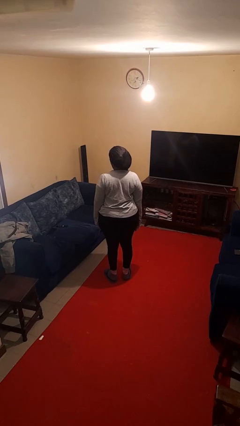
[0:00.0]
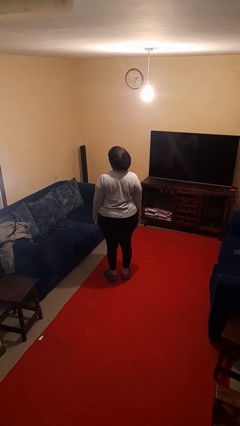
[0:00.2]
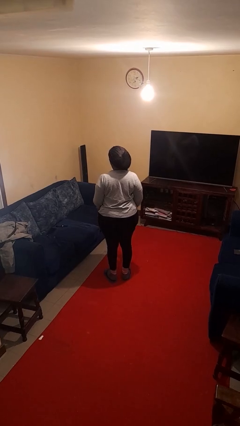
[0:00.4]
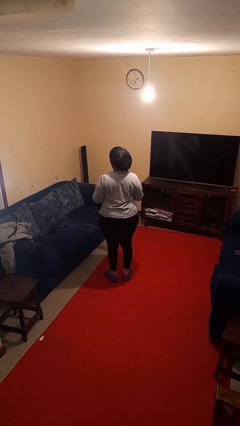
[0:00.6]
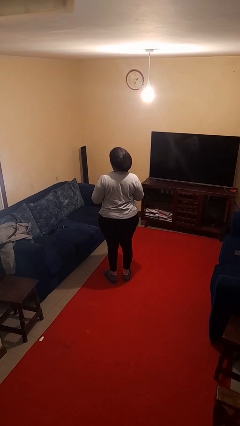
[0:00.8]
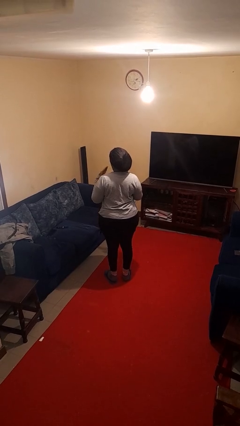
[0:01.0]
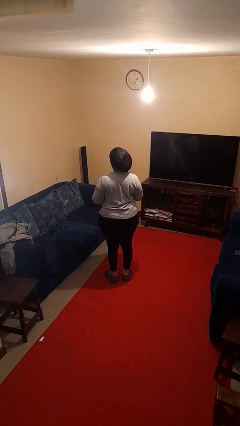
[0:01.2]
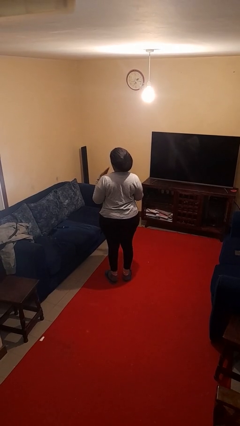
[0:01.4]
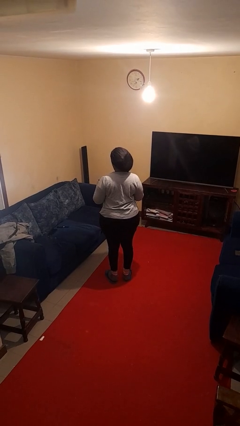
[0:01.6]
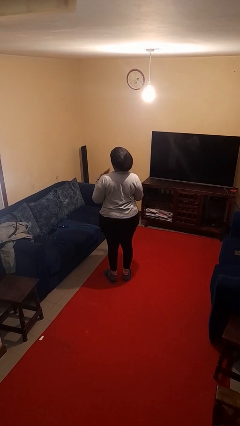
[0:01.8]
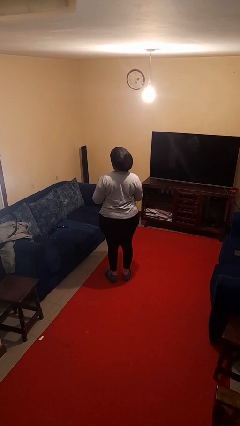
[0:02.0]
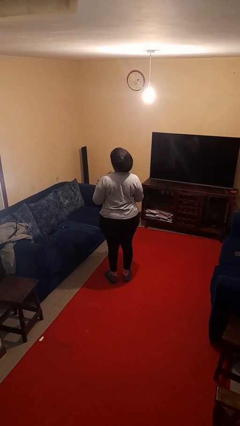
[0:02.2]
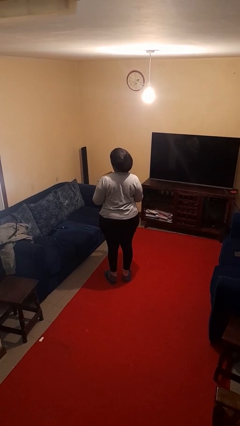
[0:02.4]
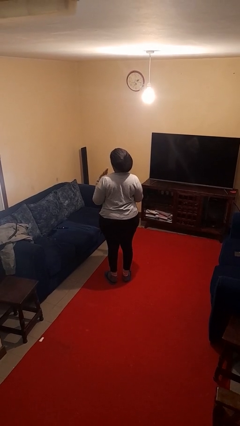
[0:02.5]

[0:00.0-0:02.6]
person drums on chest

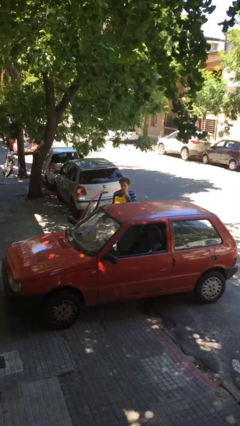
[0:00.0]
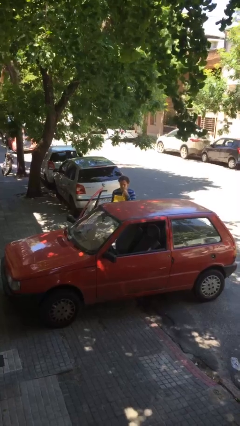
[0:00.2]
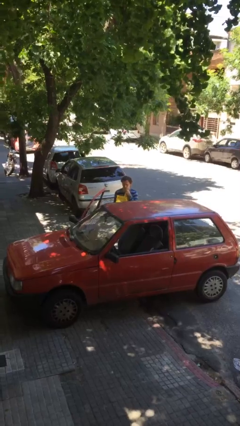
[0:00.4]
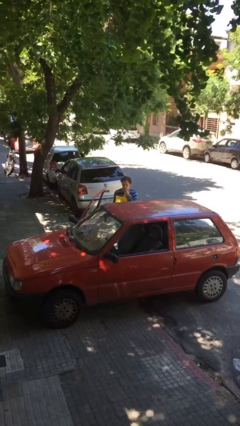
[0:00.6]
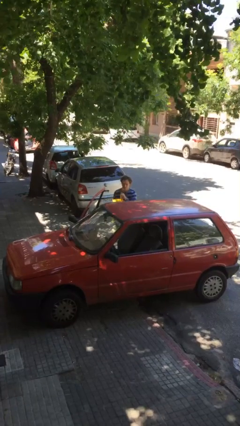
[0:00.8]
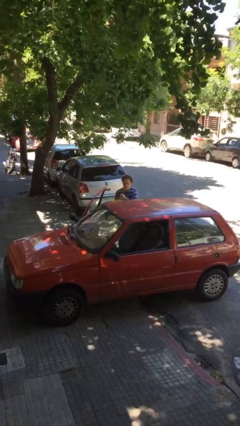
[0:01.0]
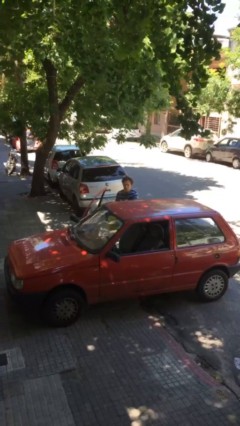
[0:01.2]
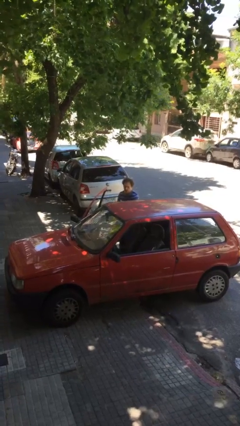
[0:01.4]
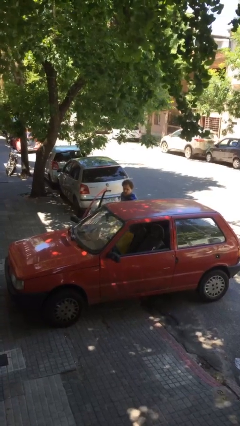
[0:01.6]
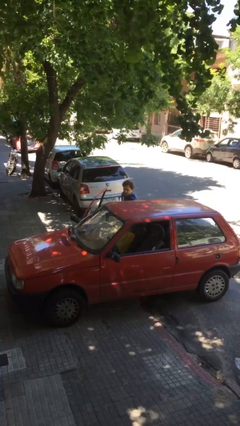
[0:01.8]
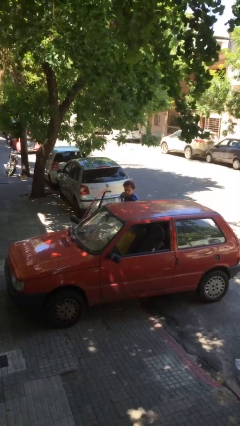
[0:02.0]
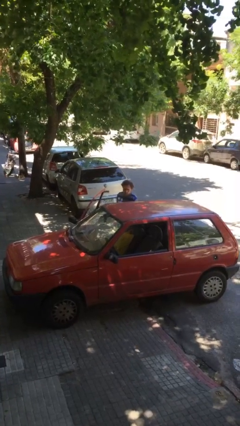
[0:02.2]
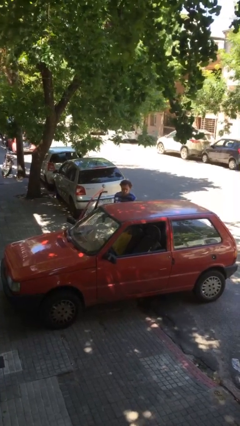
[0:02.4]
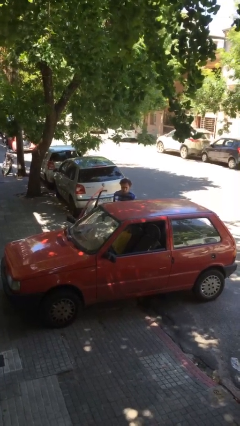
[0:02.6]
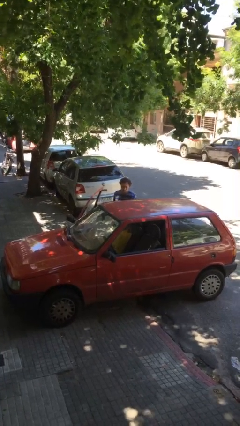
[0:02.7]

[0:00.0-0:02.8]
person loads car

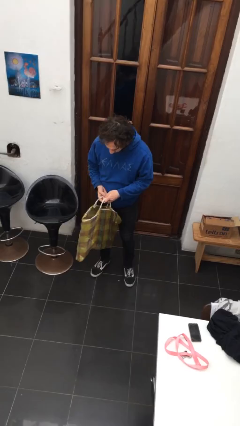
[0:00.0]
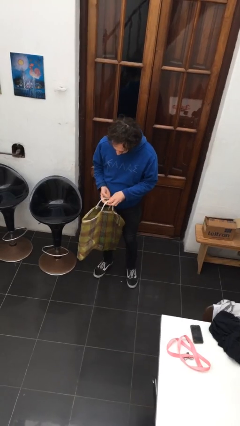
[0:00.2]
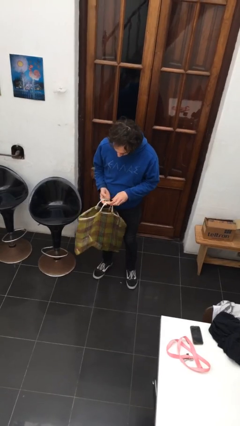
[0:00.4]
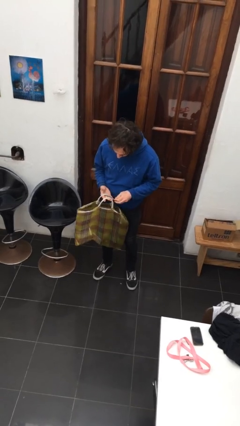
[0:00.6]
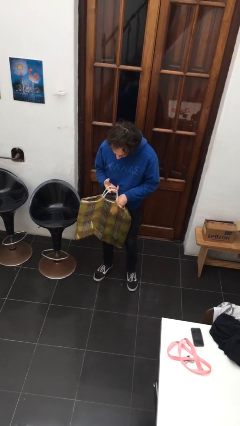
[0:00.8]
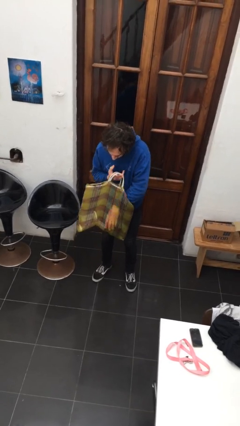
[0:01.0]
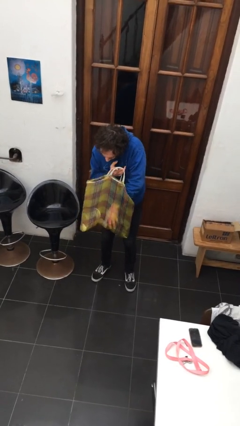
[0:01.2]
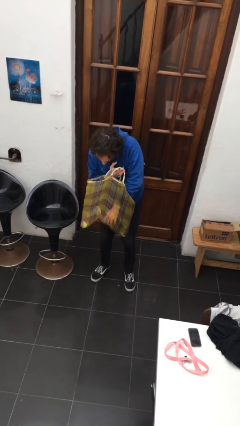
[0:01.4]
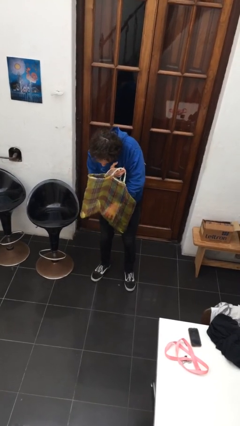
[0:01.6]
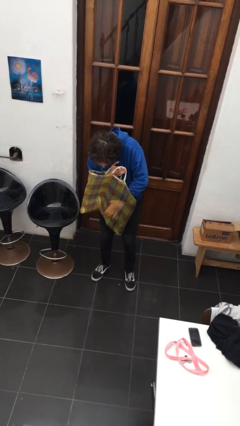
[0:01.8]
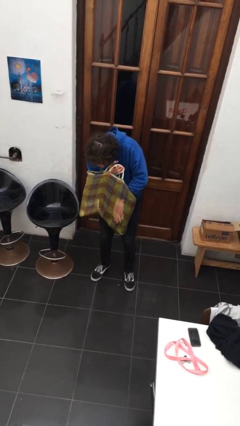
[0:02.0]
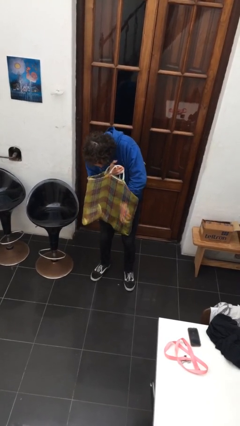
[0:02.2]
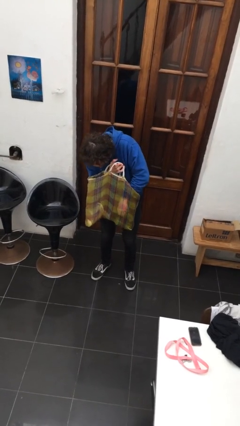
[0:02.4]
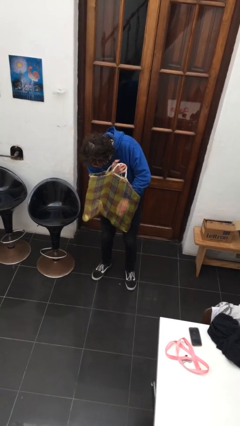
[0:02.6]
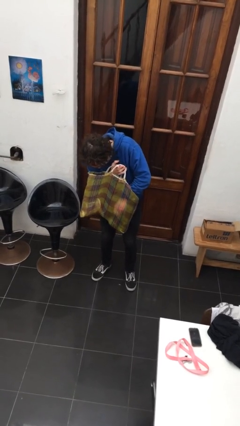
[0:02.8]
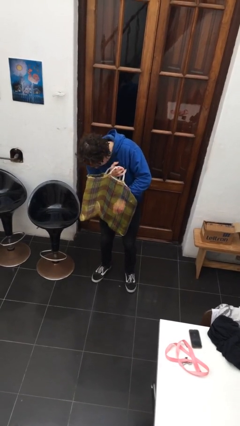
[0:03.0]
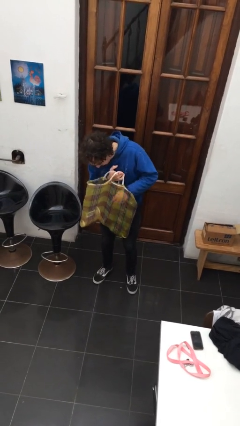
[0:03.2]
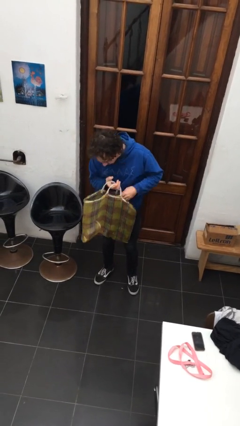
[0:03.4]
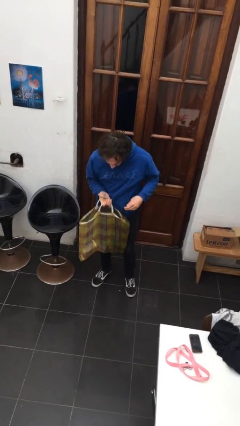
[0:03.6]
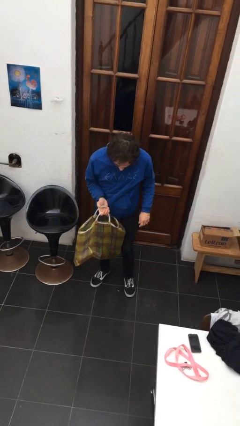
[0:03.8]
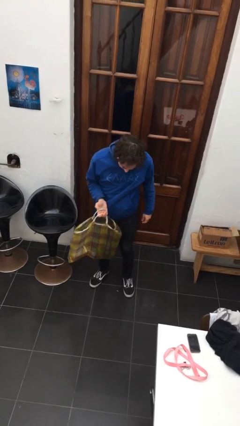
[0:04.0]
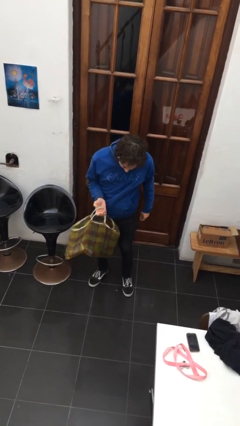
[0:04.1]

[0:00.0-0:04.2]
person searches in bag

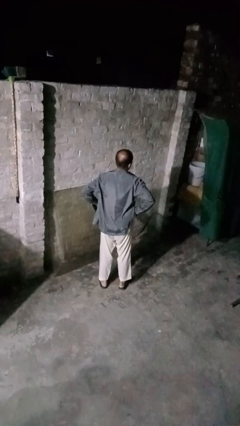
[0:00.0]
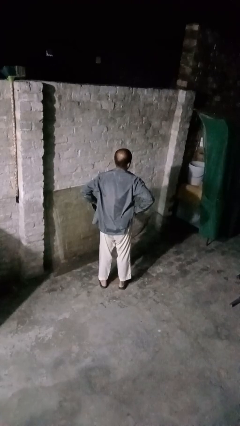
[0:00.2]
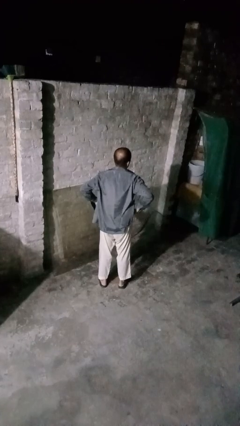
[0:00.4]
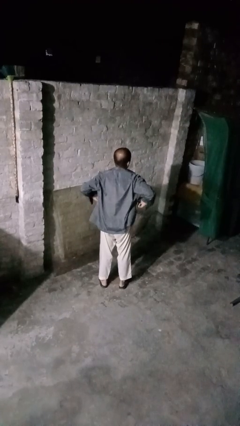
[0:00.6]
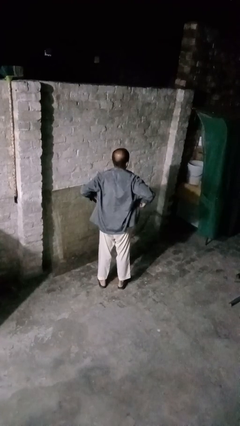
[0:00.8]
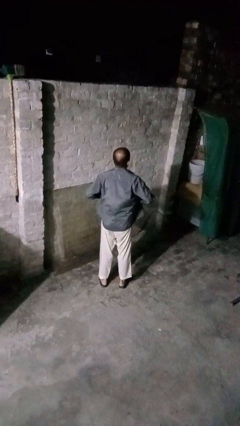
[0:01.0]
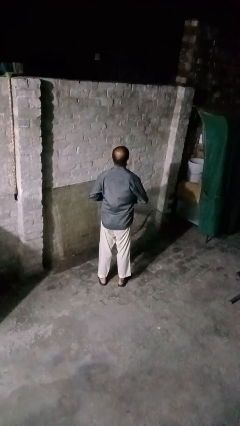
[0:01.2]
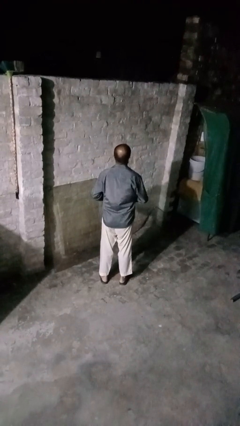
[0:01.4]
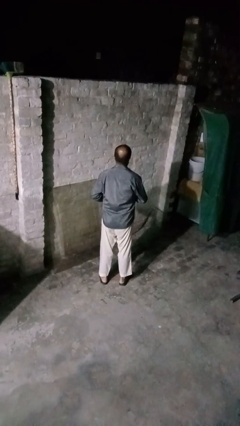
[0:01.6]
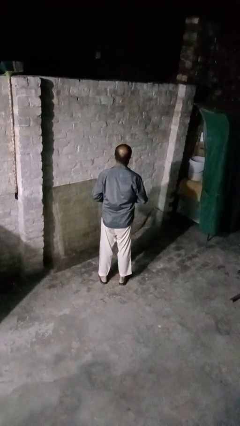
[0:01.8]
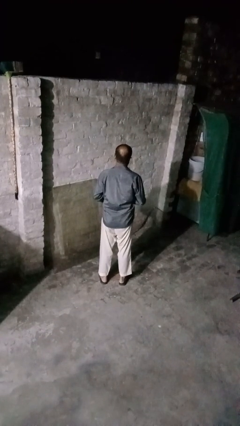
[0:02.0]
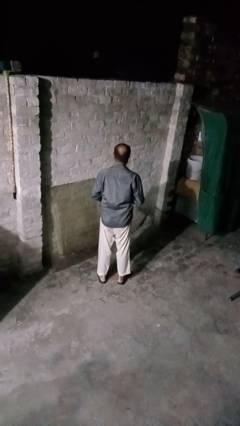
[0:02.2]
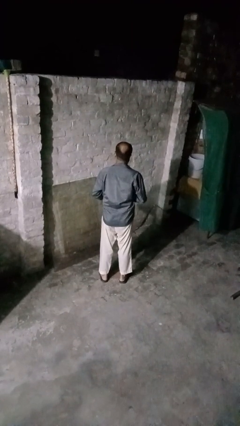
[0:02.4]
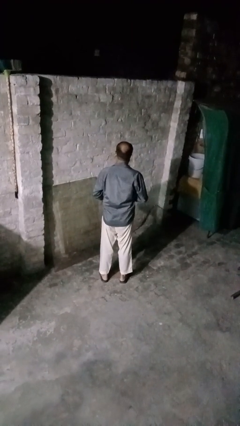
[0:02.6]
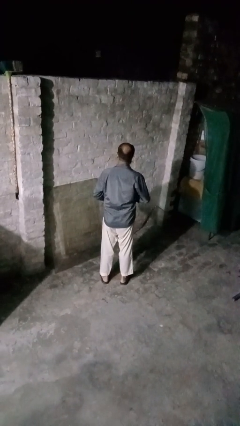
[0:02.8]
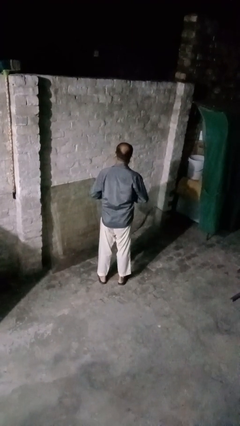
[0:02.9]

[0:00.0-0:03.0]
person buttons shirt

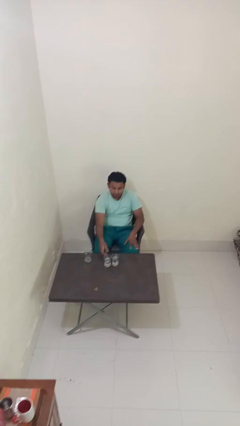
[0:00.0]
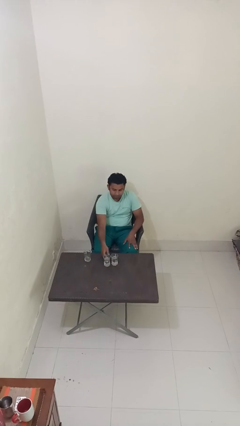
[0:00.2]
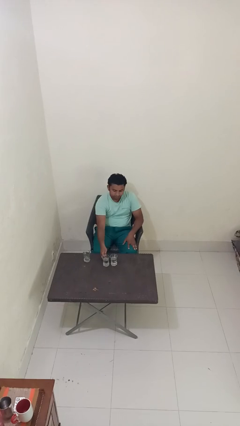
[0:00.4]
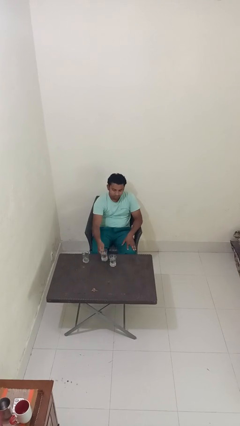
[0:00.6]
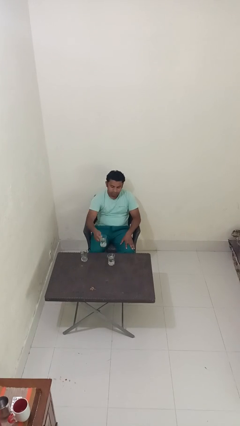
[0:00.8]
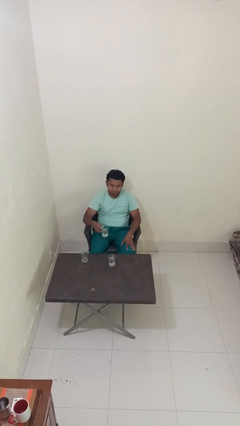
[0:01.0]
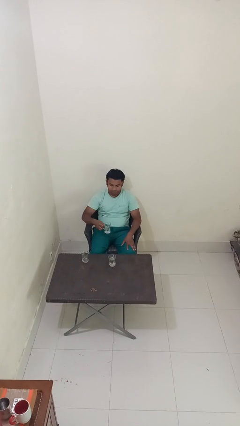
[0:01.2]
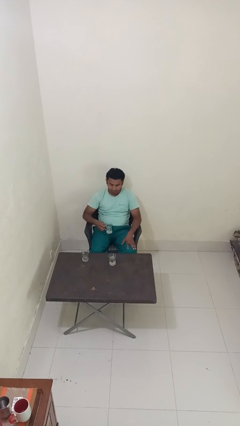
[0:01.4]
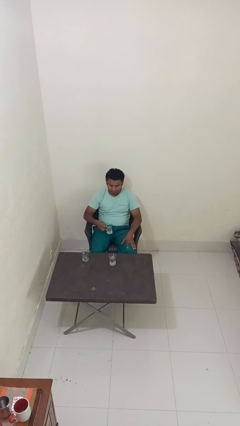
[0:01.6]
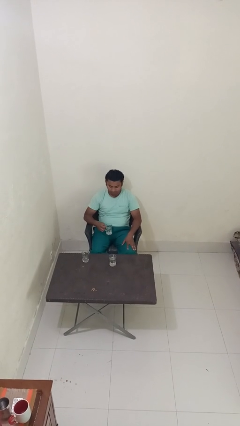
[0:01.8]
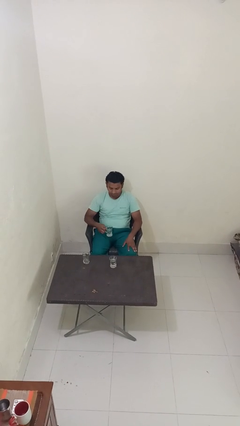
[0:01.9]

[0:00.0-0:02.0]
person picks up object from table

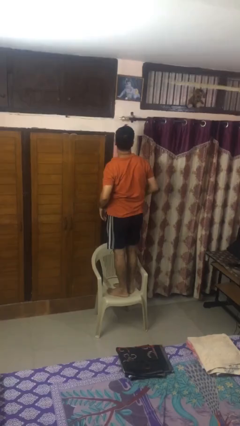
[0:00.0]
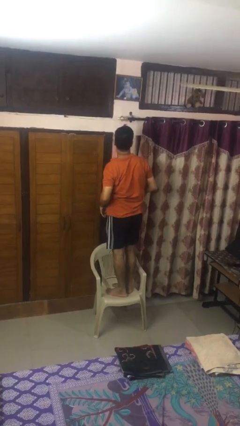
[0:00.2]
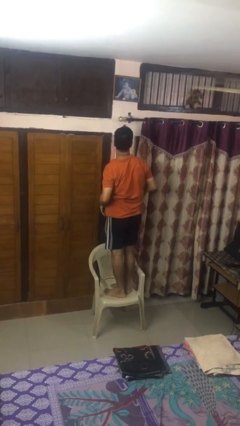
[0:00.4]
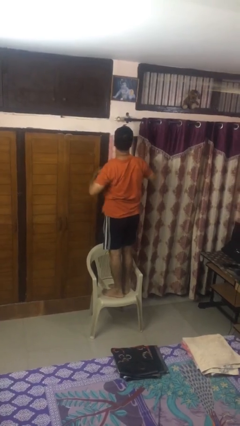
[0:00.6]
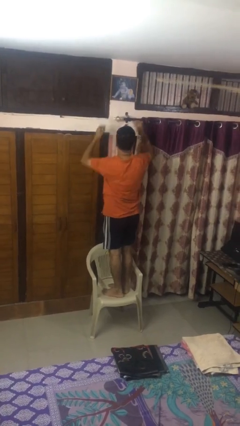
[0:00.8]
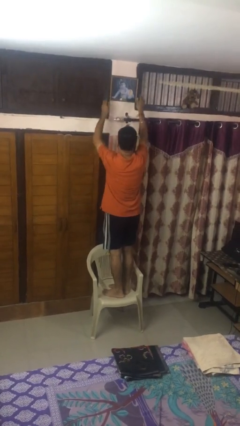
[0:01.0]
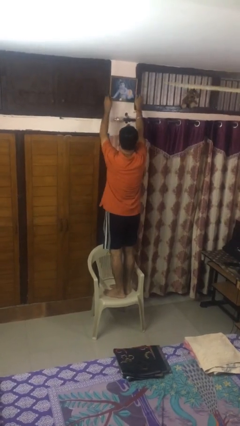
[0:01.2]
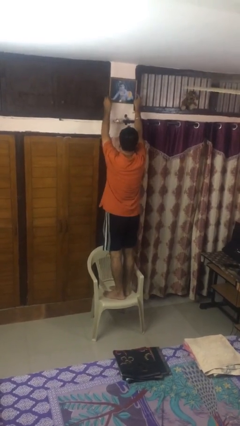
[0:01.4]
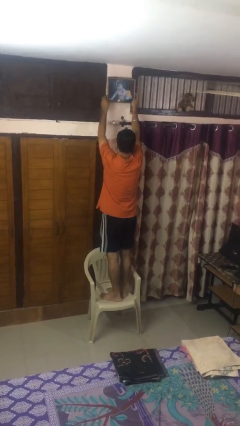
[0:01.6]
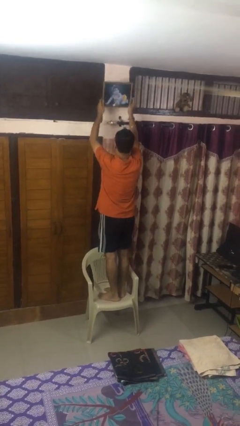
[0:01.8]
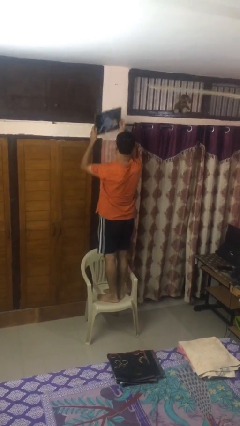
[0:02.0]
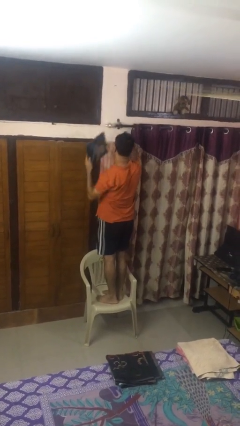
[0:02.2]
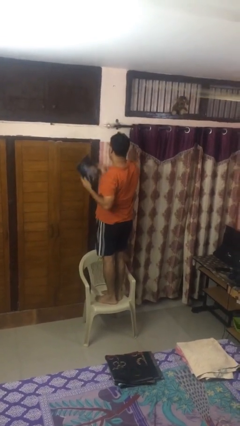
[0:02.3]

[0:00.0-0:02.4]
person takes down picture frame

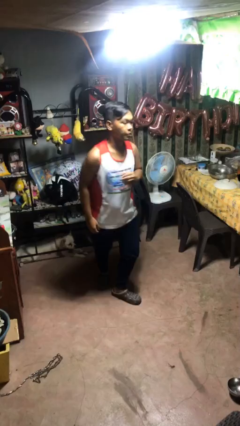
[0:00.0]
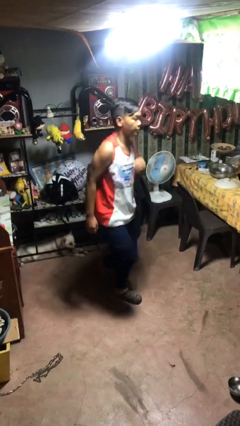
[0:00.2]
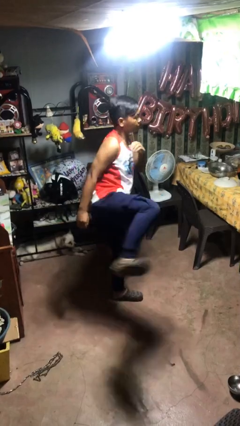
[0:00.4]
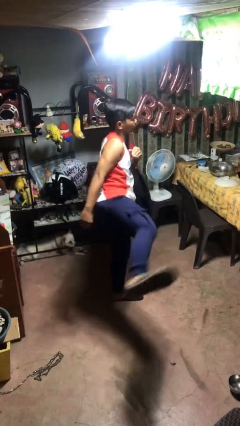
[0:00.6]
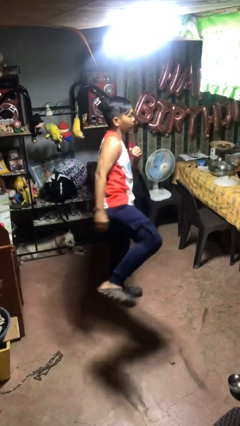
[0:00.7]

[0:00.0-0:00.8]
person karate kicks
